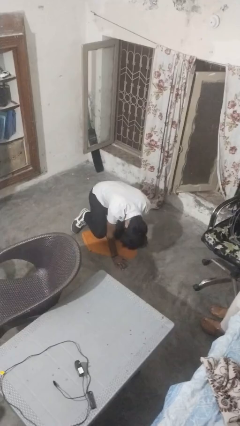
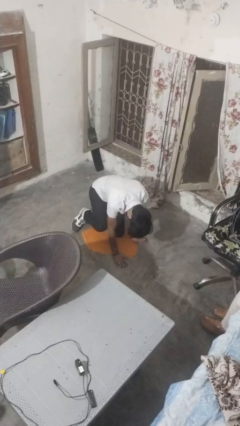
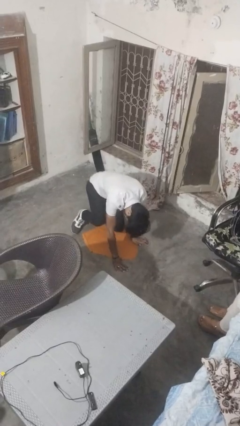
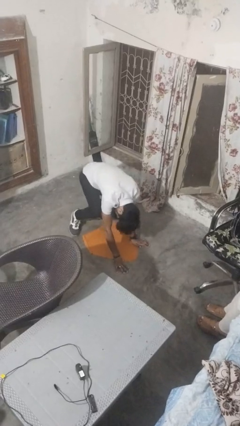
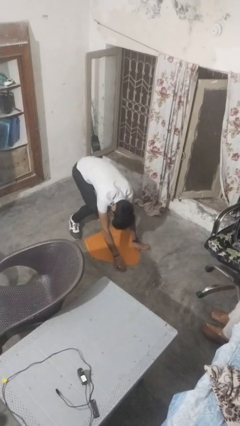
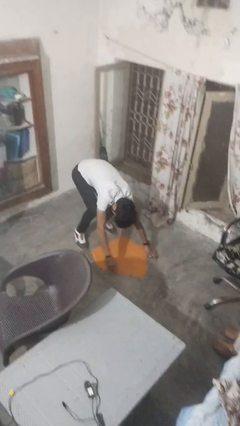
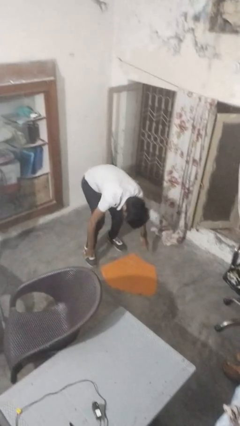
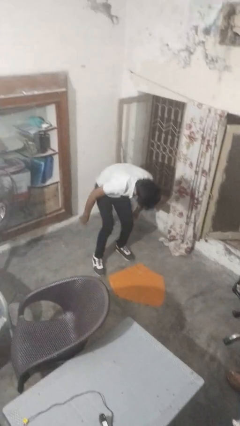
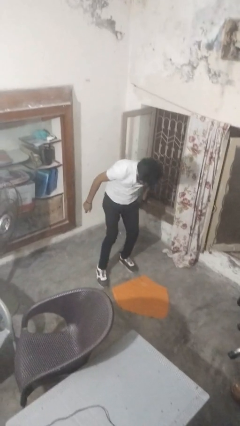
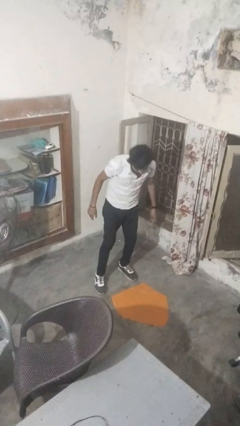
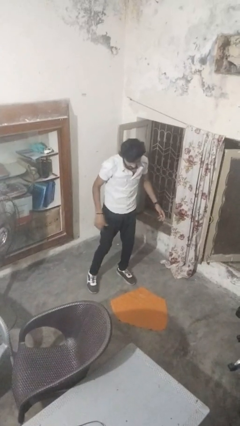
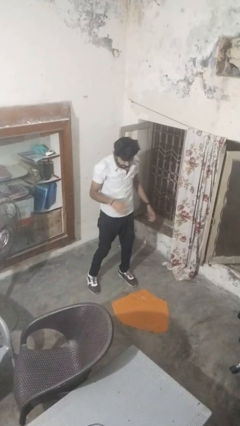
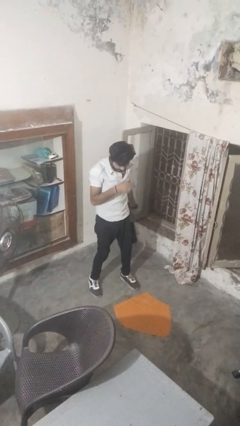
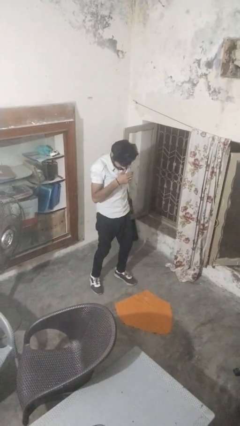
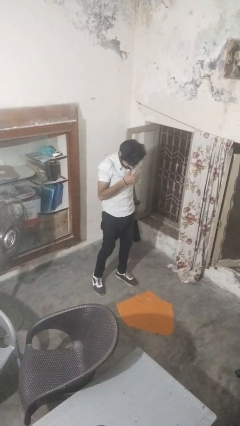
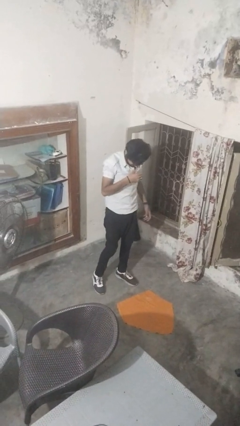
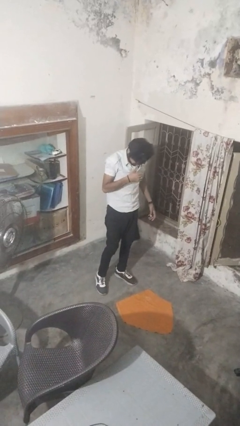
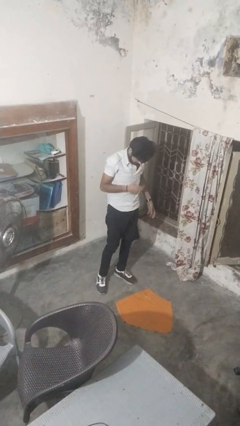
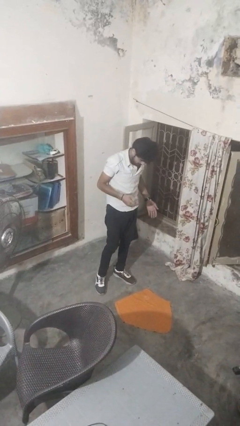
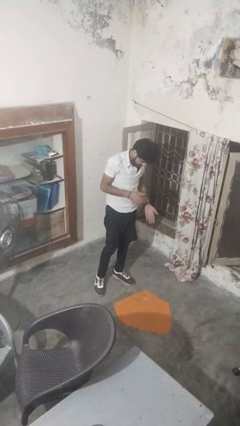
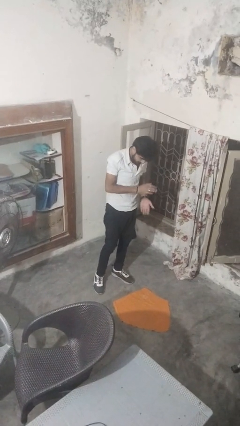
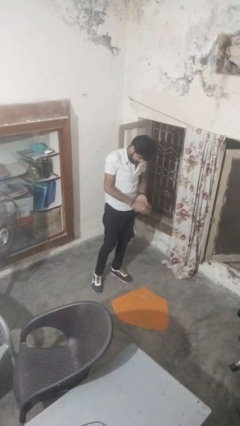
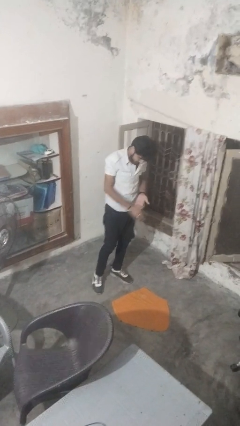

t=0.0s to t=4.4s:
person stands up from floor

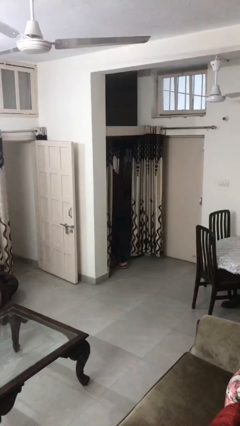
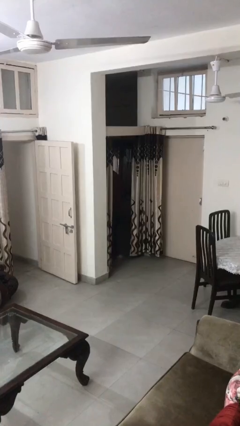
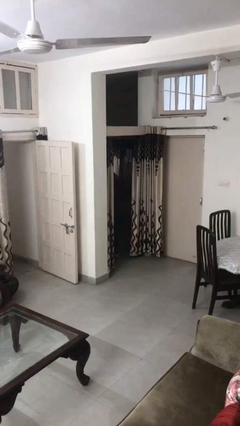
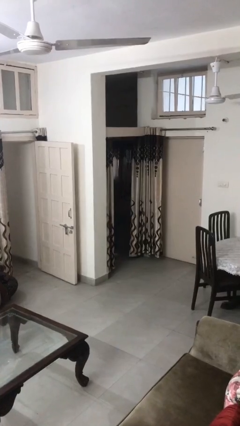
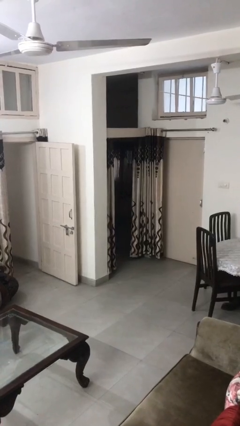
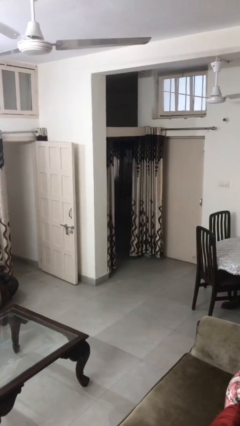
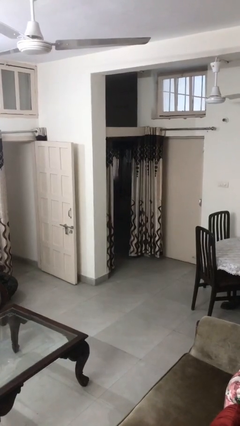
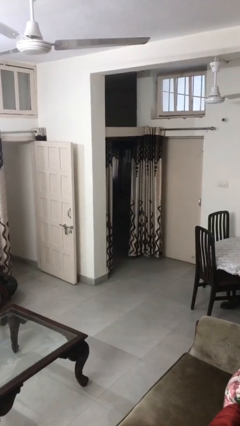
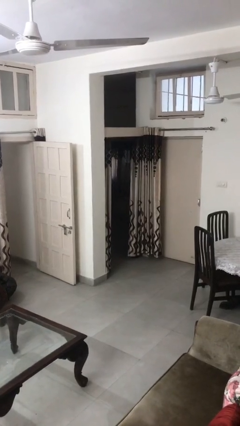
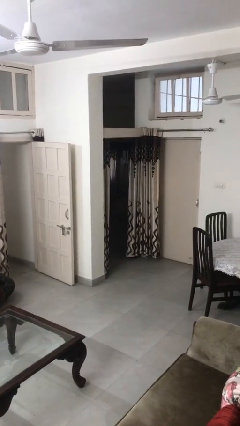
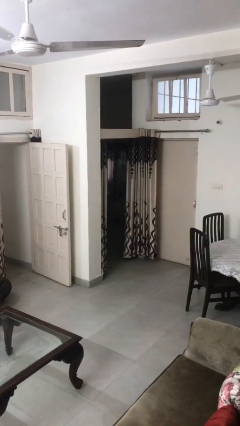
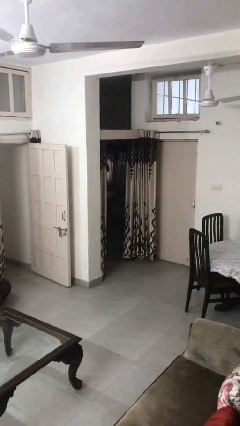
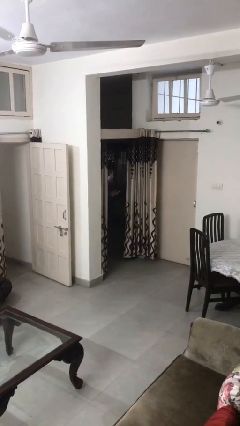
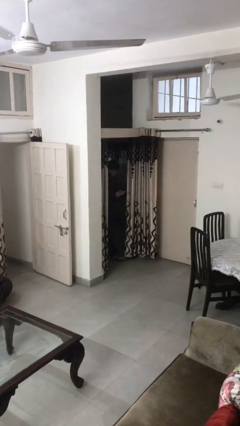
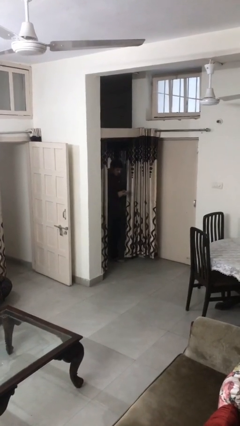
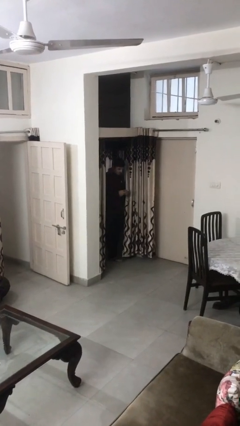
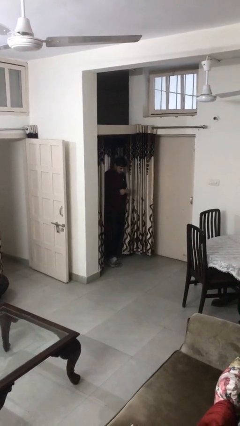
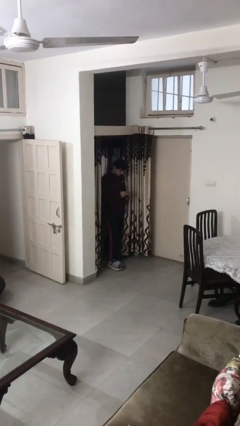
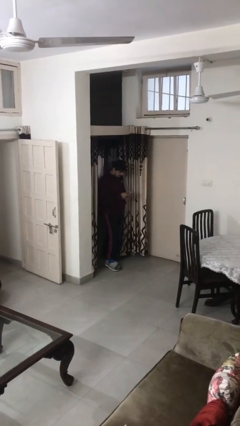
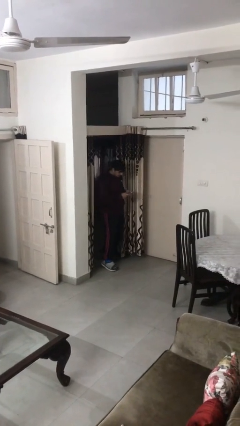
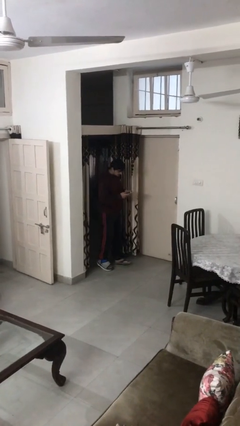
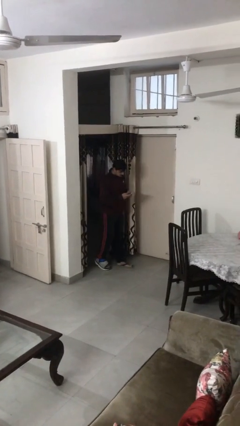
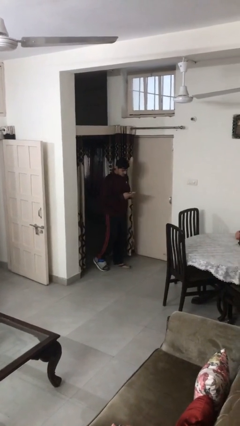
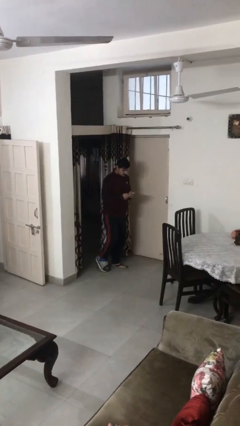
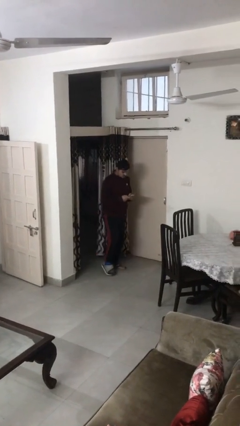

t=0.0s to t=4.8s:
person enters scene through structure

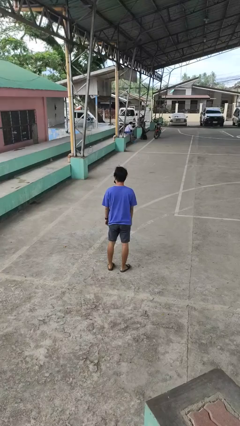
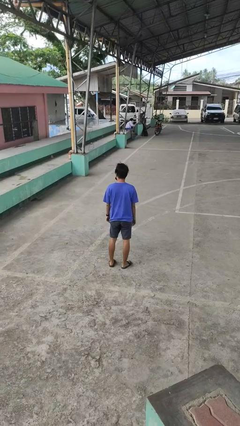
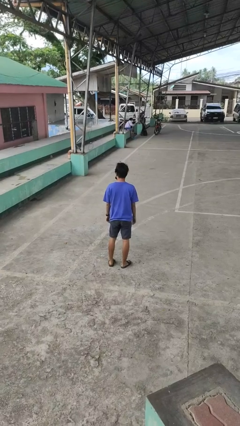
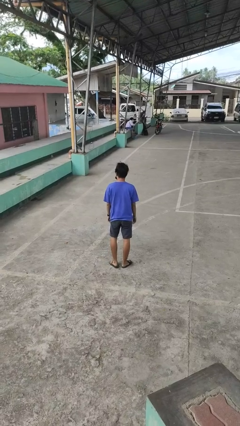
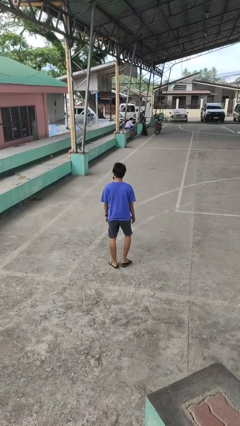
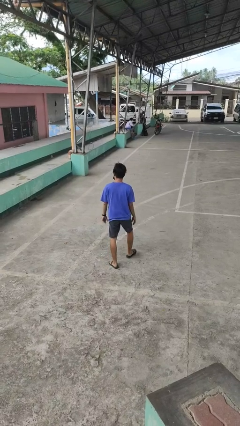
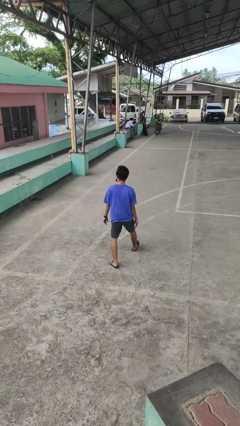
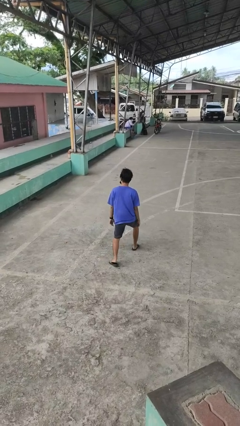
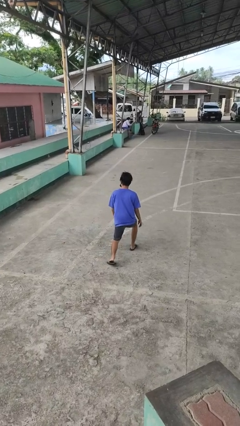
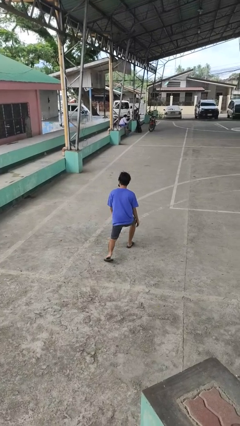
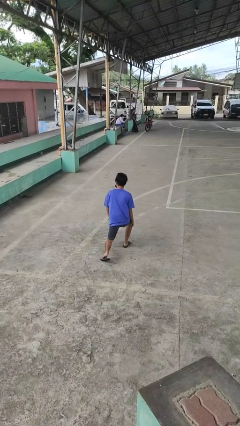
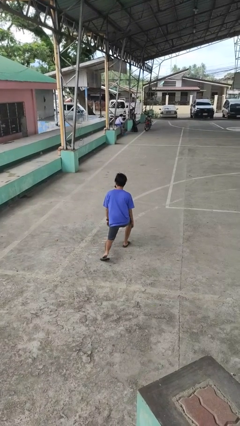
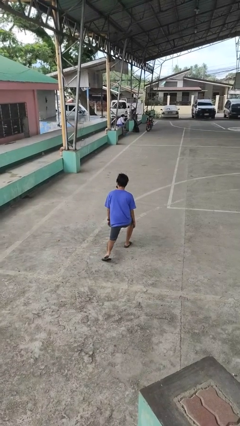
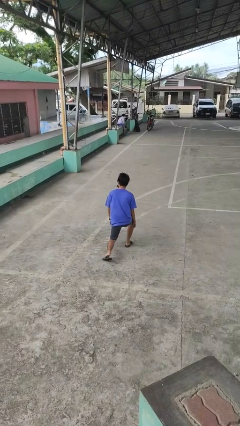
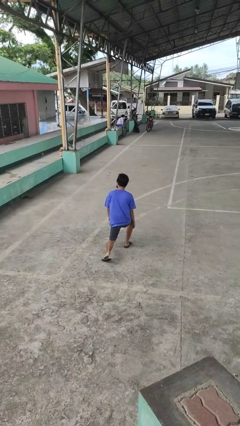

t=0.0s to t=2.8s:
person exercises with lunges

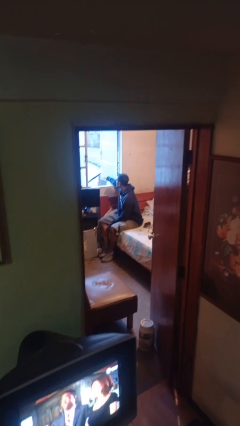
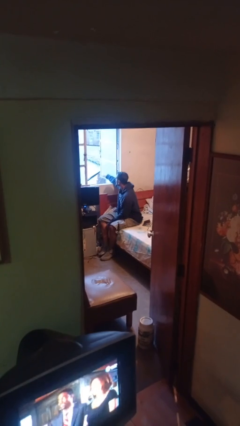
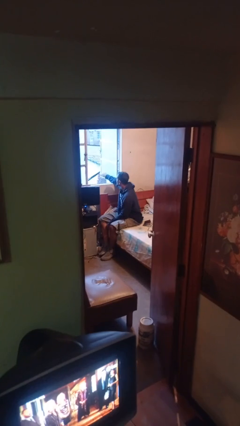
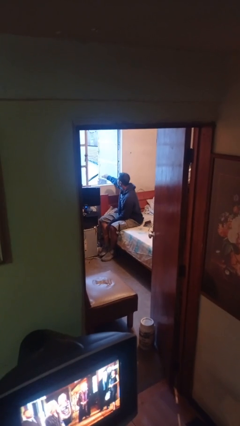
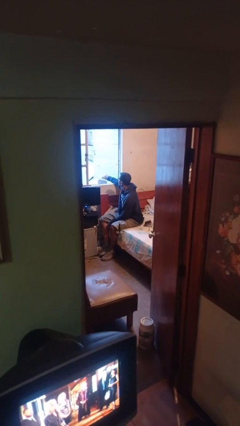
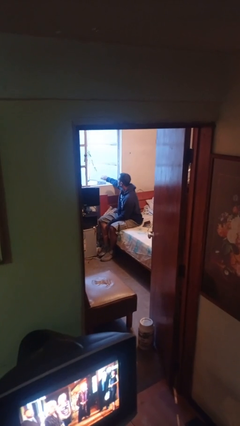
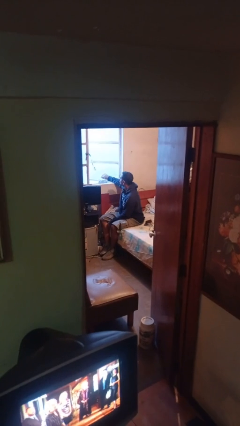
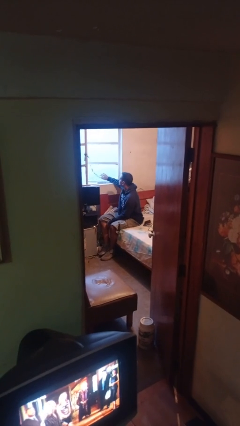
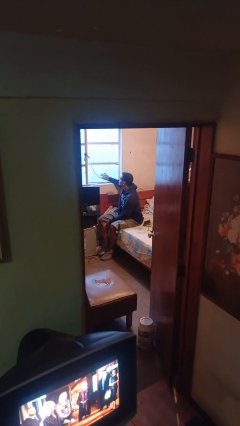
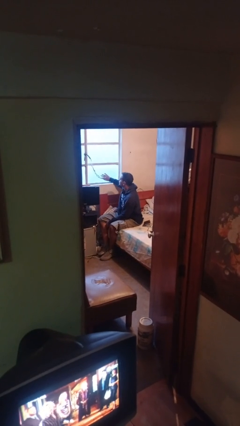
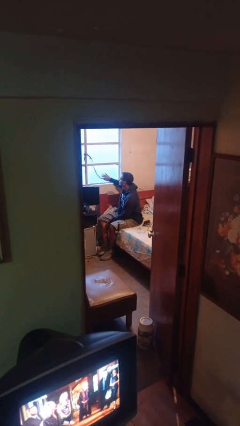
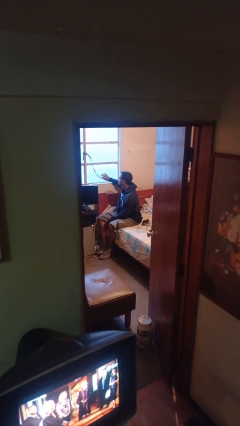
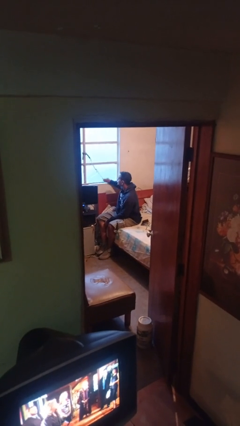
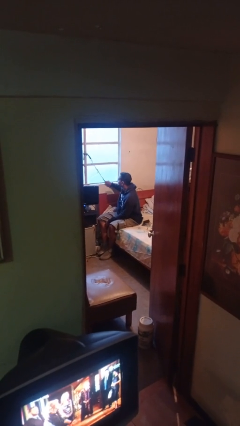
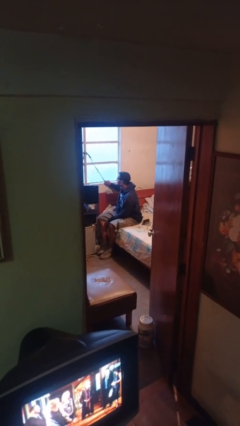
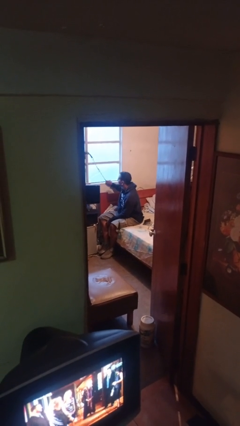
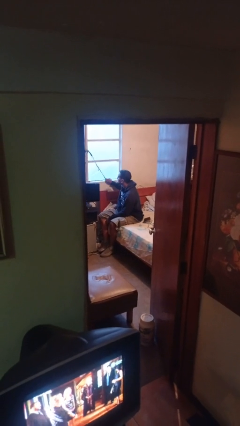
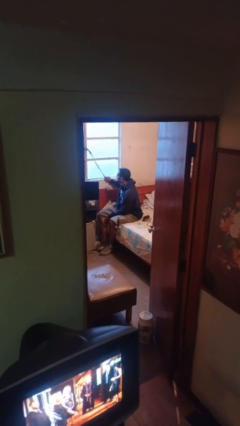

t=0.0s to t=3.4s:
person closes home window

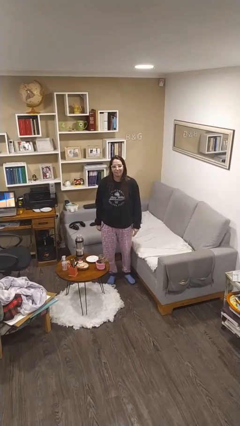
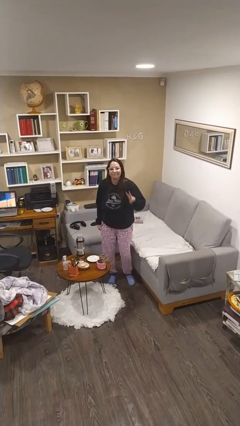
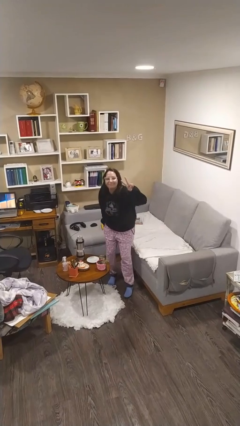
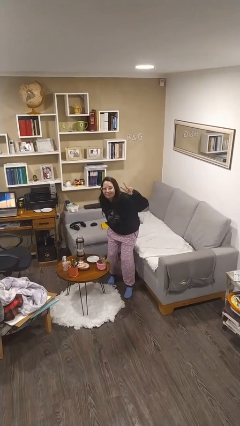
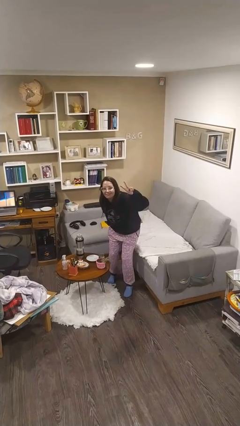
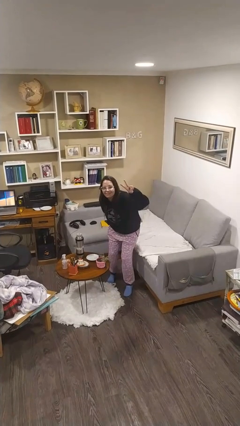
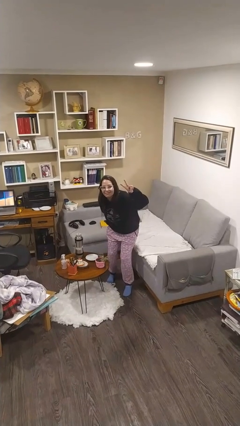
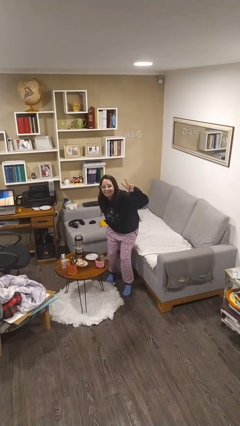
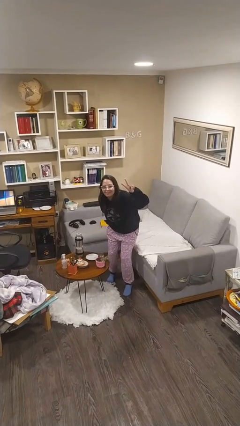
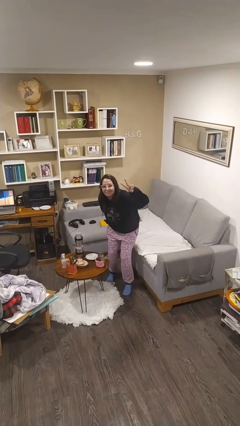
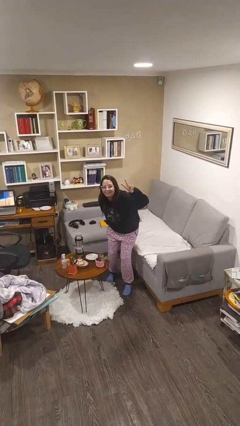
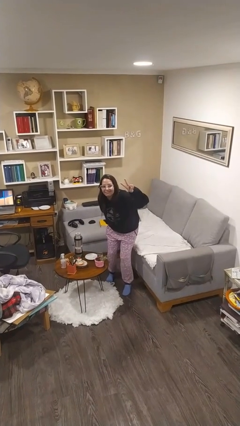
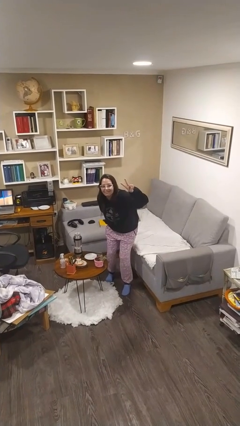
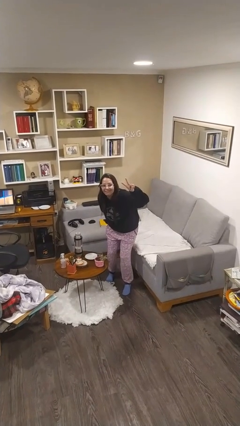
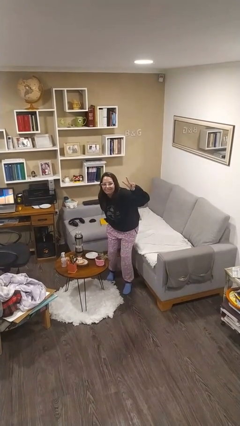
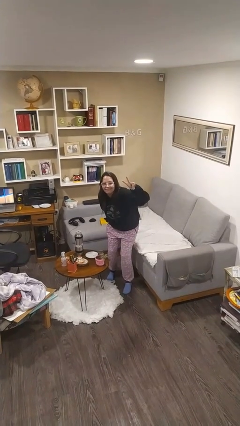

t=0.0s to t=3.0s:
person gestures peace
